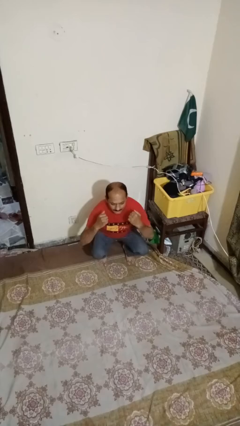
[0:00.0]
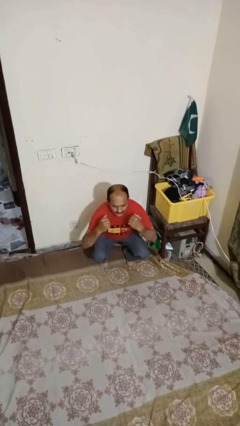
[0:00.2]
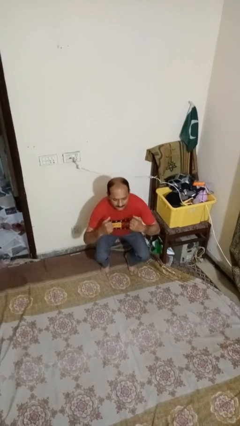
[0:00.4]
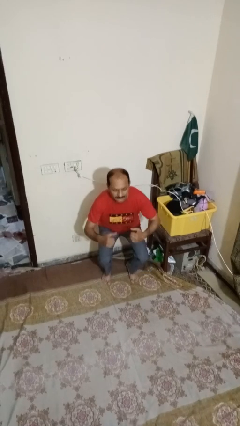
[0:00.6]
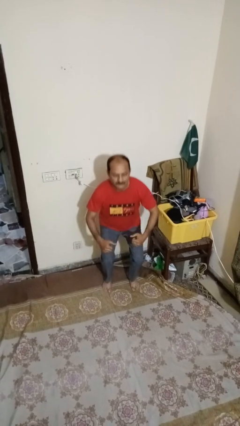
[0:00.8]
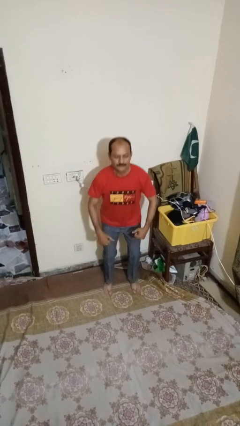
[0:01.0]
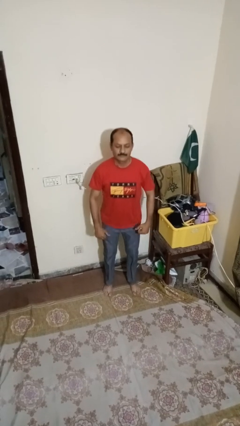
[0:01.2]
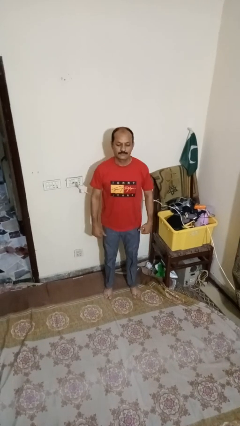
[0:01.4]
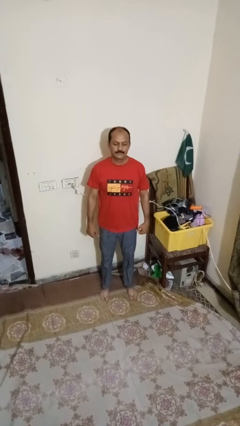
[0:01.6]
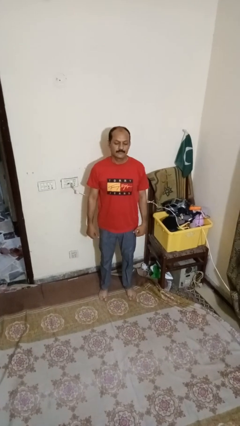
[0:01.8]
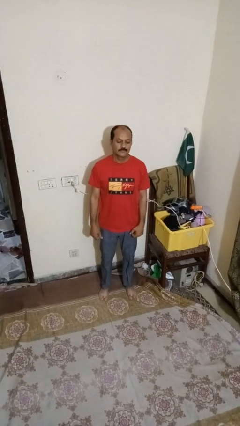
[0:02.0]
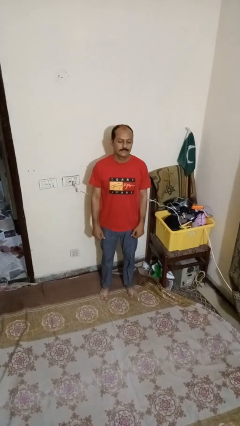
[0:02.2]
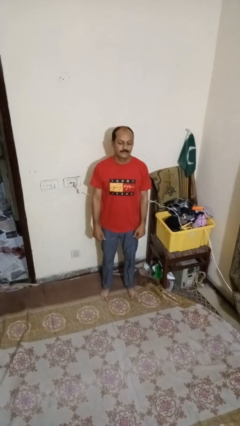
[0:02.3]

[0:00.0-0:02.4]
person stands up

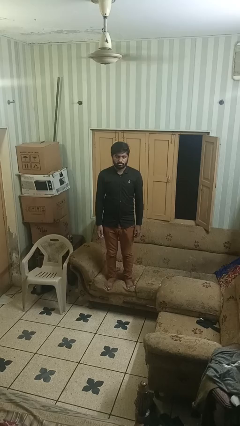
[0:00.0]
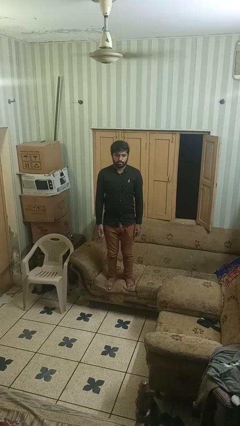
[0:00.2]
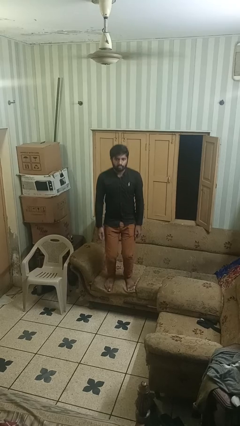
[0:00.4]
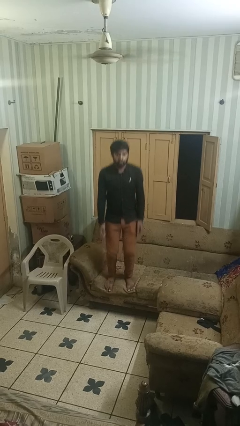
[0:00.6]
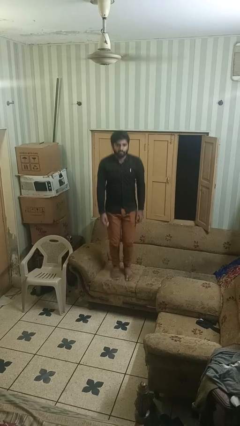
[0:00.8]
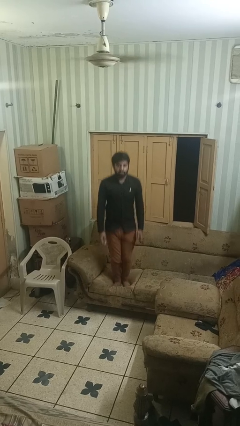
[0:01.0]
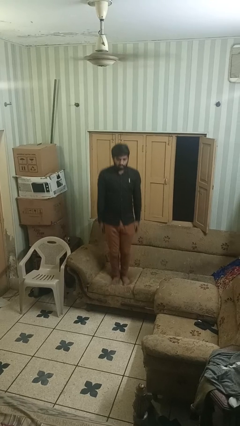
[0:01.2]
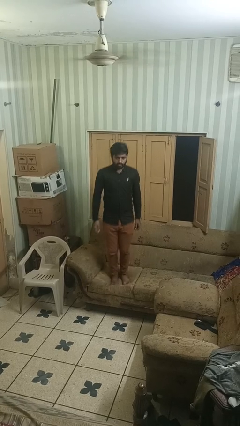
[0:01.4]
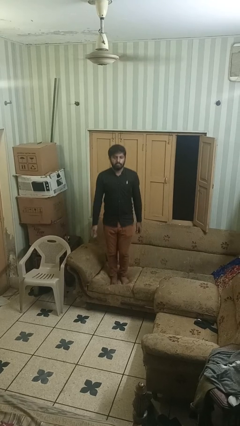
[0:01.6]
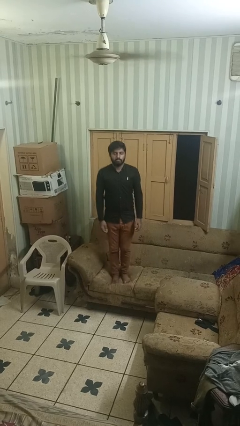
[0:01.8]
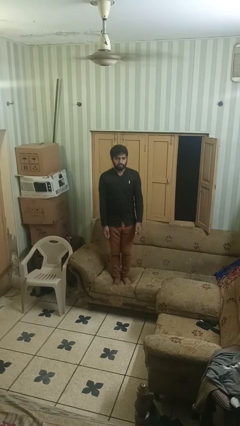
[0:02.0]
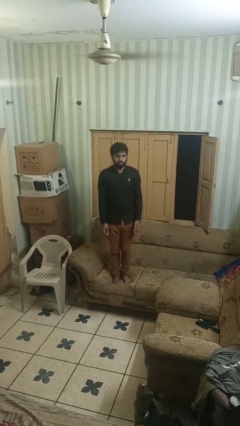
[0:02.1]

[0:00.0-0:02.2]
person jumps on couch

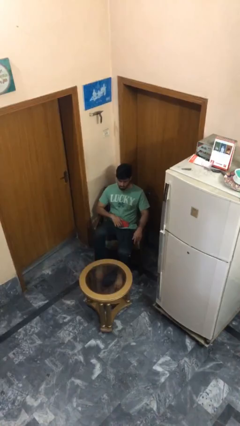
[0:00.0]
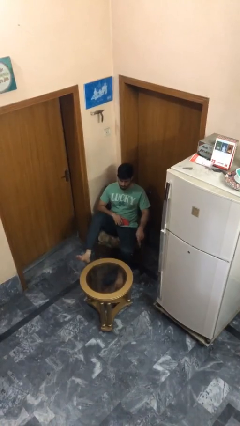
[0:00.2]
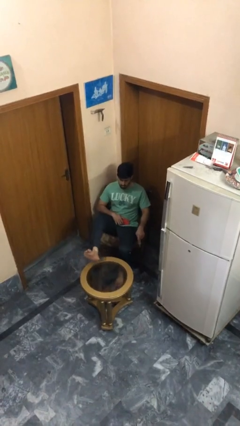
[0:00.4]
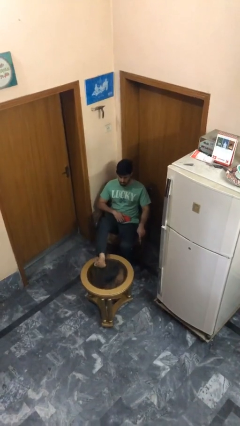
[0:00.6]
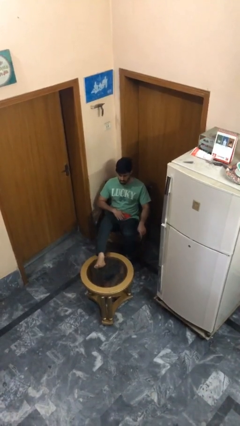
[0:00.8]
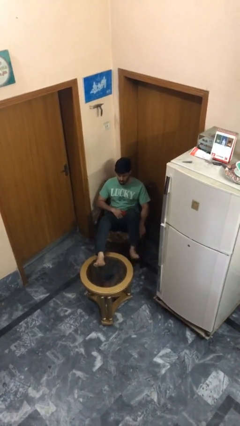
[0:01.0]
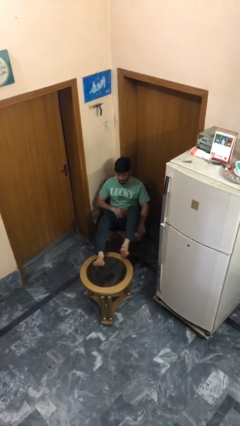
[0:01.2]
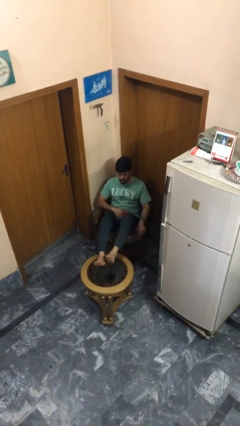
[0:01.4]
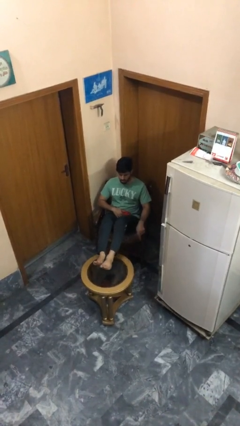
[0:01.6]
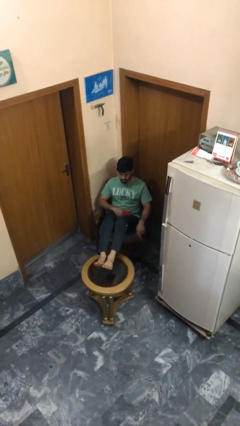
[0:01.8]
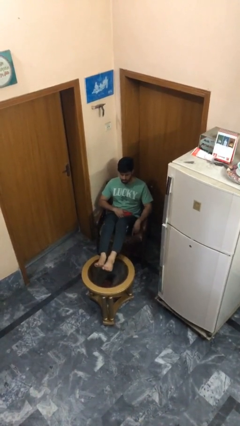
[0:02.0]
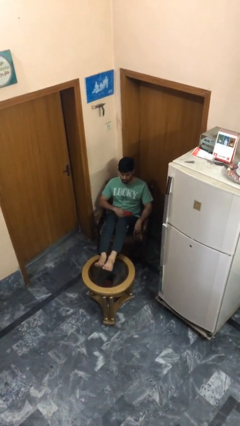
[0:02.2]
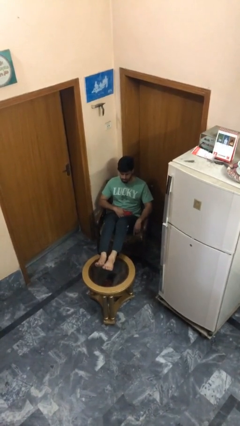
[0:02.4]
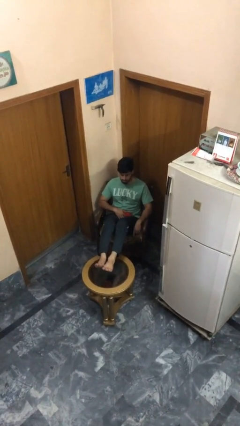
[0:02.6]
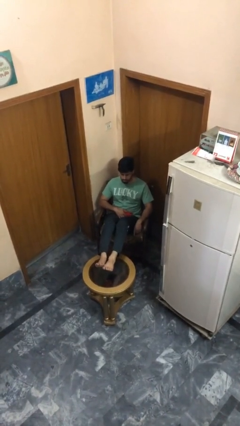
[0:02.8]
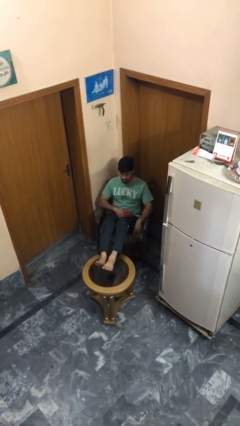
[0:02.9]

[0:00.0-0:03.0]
person puts feet up

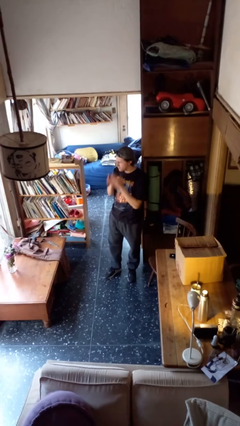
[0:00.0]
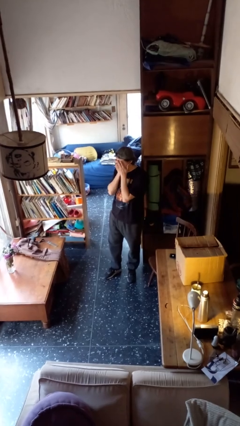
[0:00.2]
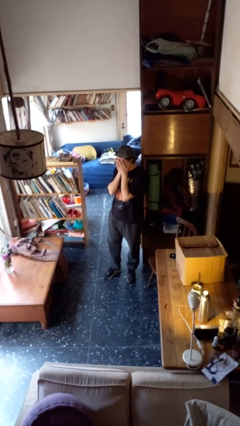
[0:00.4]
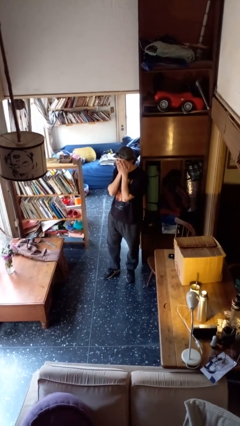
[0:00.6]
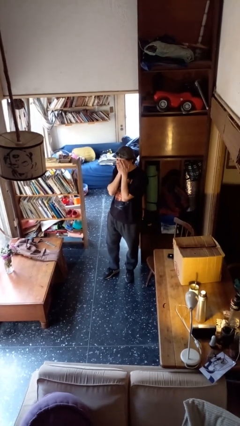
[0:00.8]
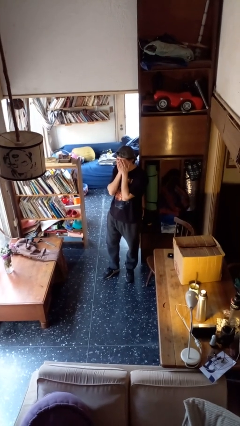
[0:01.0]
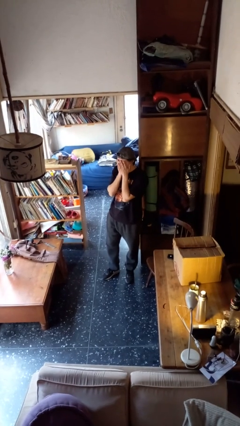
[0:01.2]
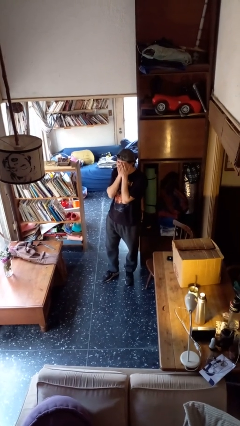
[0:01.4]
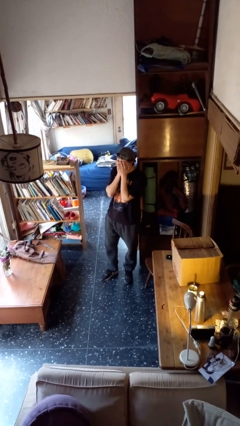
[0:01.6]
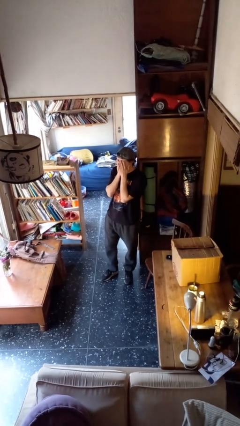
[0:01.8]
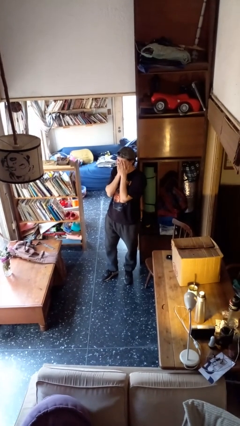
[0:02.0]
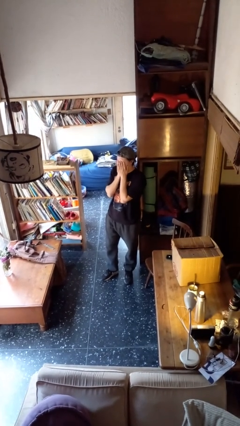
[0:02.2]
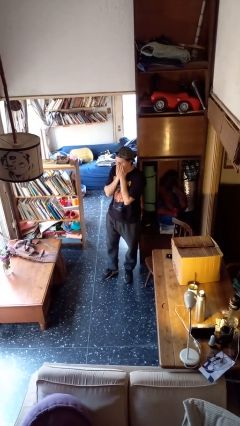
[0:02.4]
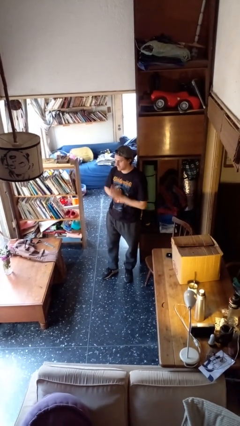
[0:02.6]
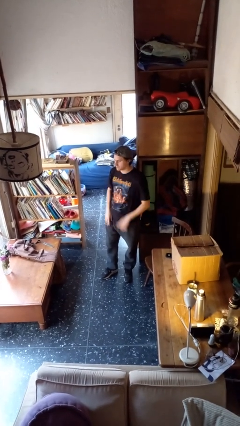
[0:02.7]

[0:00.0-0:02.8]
person covers face with hands

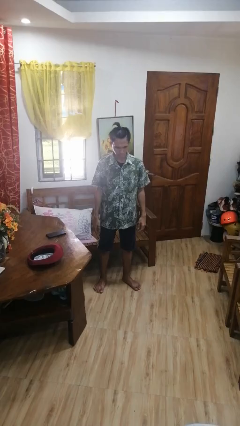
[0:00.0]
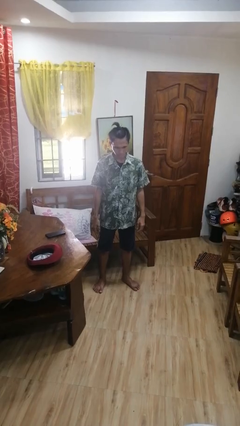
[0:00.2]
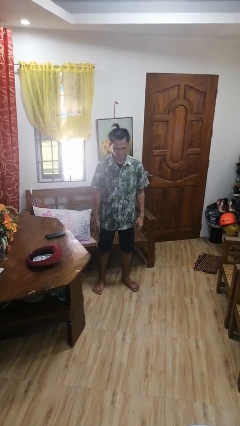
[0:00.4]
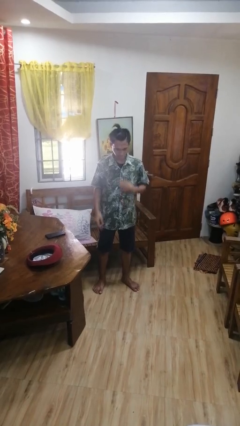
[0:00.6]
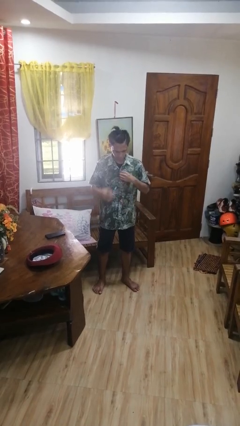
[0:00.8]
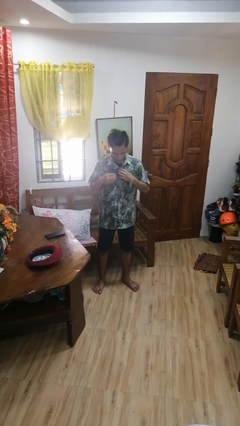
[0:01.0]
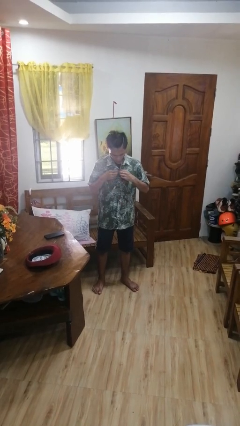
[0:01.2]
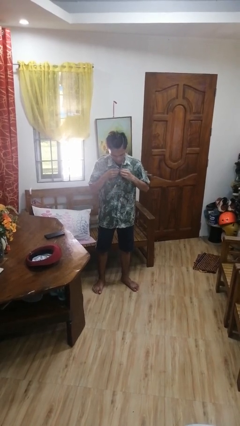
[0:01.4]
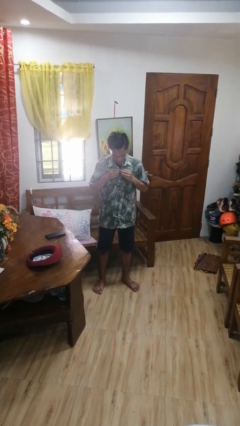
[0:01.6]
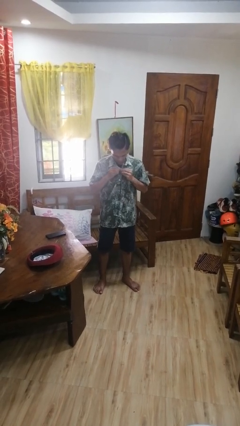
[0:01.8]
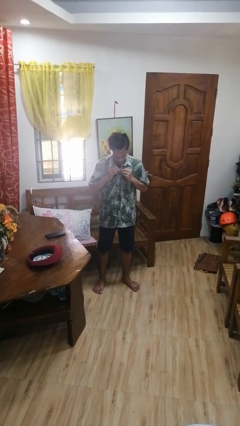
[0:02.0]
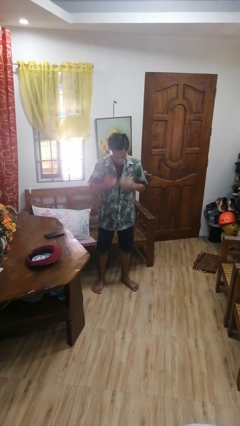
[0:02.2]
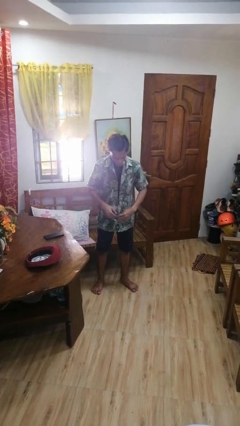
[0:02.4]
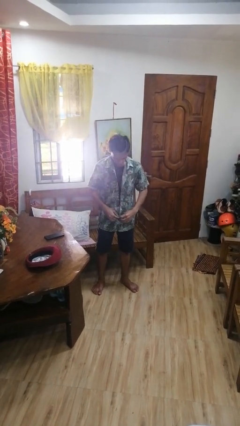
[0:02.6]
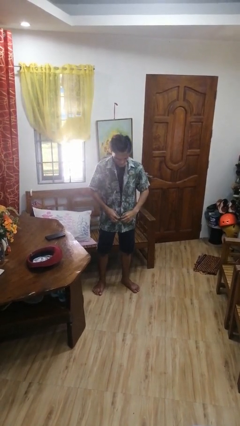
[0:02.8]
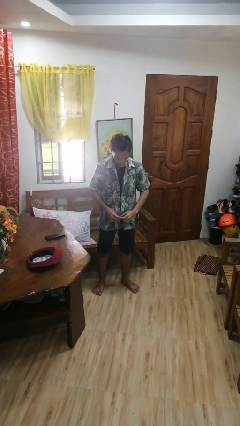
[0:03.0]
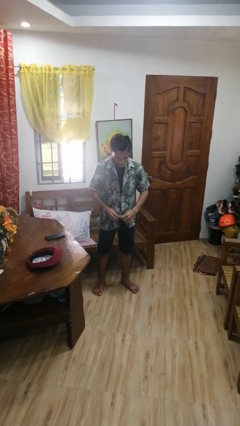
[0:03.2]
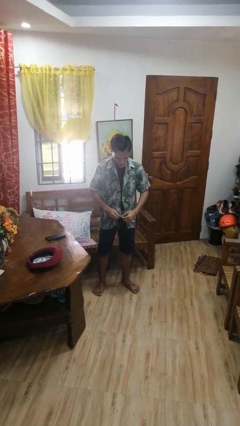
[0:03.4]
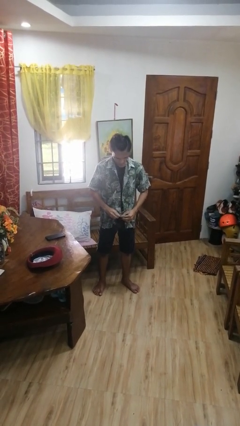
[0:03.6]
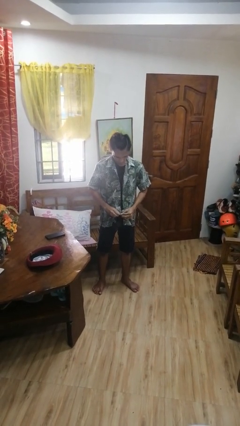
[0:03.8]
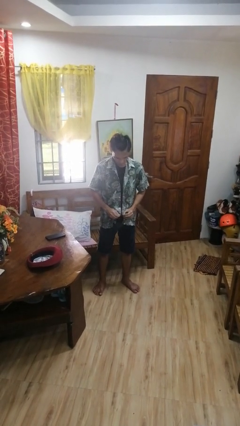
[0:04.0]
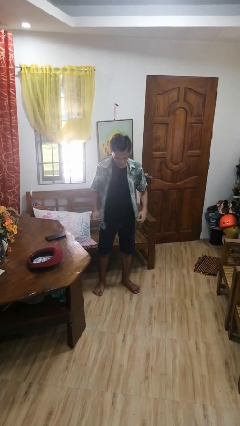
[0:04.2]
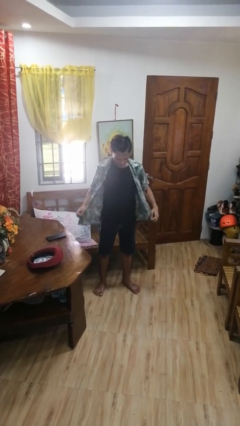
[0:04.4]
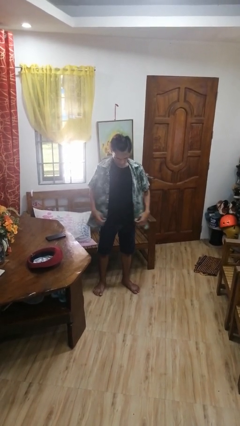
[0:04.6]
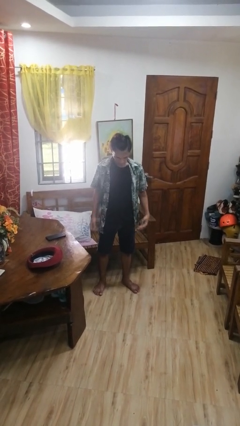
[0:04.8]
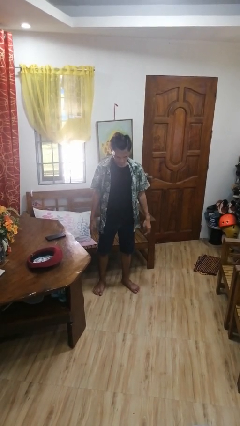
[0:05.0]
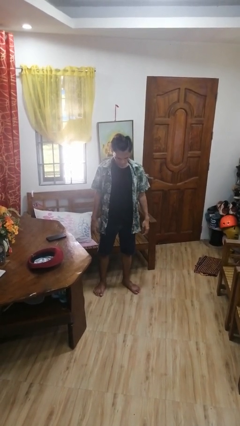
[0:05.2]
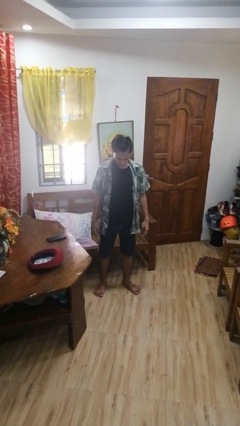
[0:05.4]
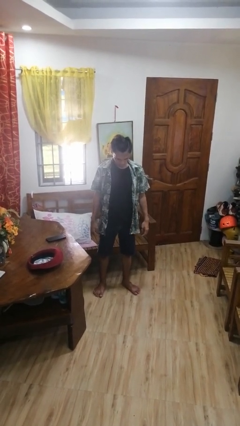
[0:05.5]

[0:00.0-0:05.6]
person unbuttons shirt

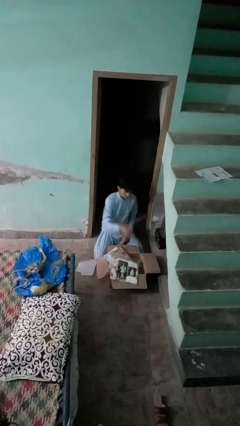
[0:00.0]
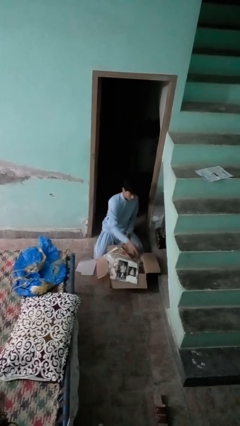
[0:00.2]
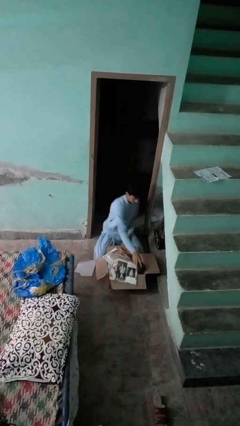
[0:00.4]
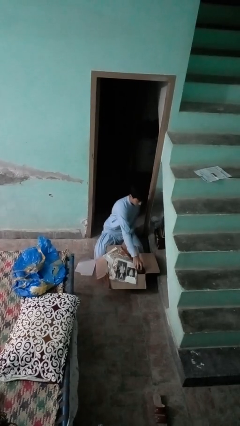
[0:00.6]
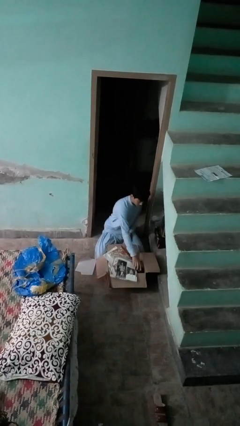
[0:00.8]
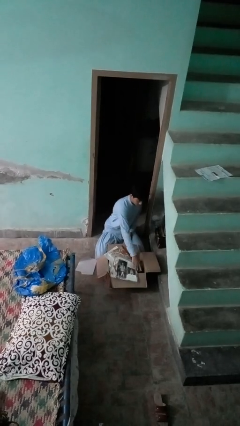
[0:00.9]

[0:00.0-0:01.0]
person puts object into box

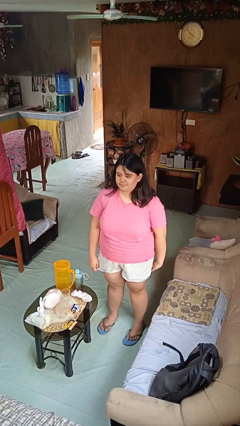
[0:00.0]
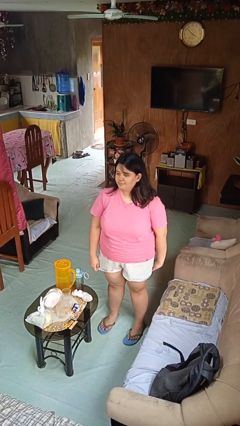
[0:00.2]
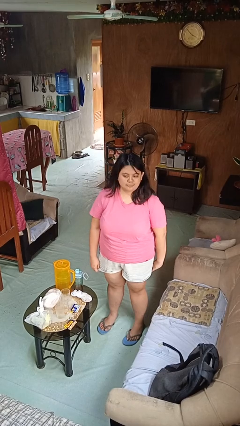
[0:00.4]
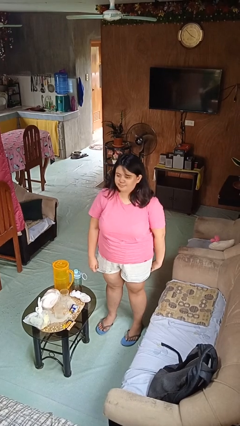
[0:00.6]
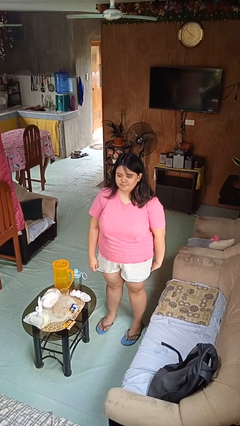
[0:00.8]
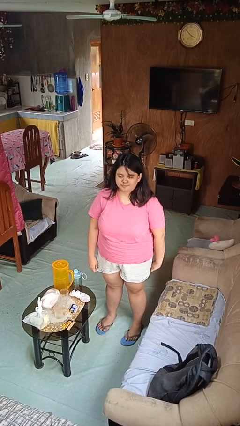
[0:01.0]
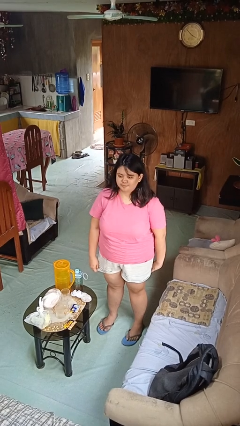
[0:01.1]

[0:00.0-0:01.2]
person shakes head
